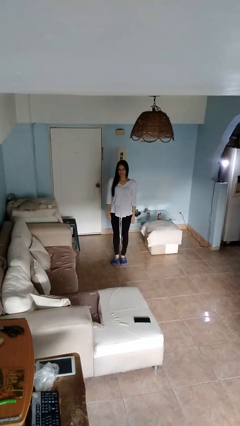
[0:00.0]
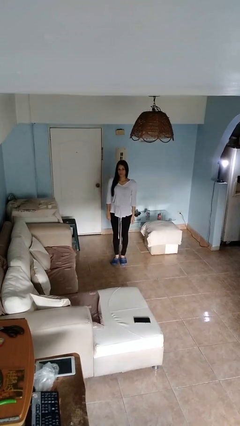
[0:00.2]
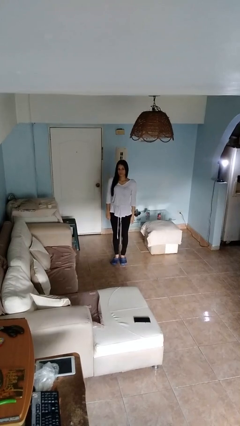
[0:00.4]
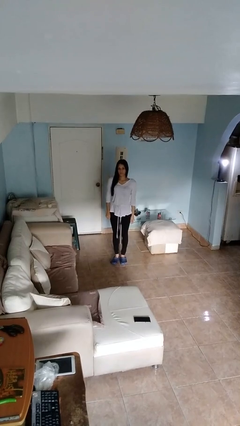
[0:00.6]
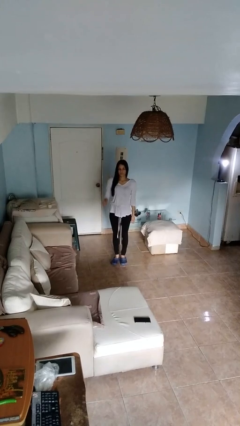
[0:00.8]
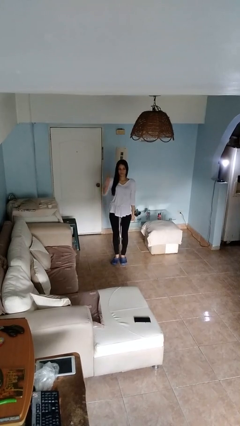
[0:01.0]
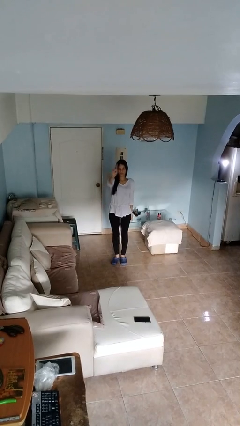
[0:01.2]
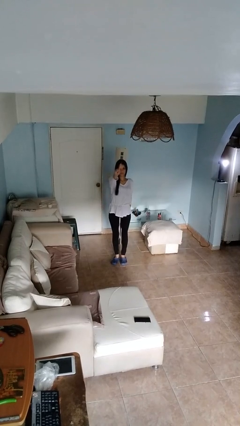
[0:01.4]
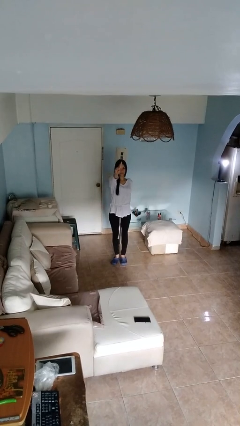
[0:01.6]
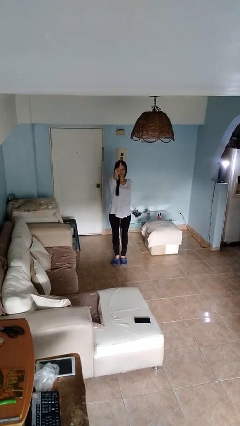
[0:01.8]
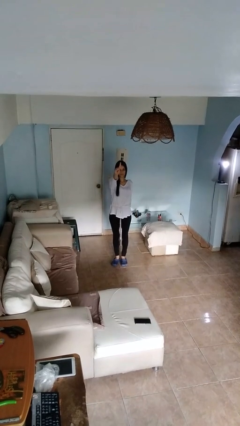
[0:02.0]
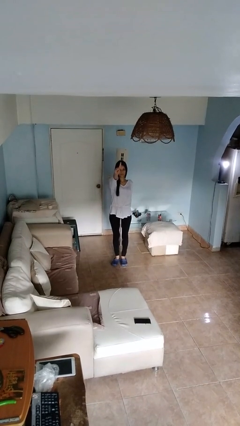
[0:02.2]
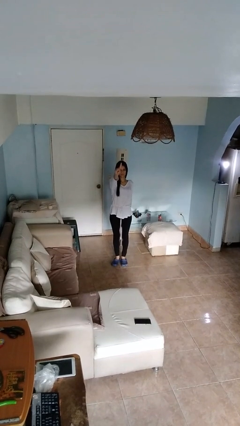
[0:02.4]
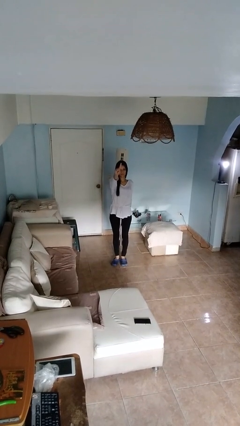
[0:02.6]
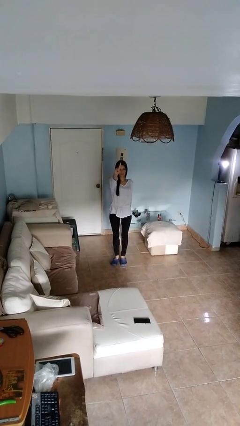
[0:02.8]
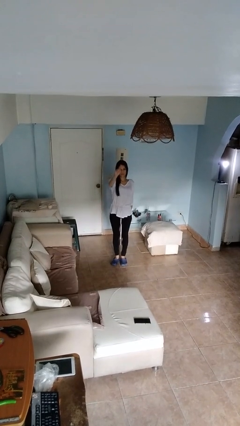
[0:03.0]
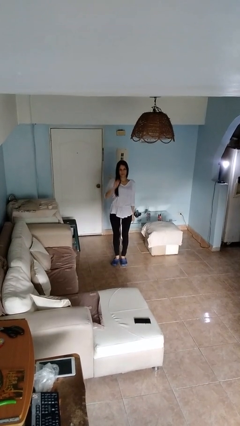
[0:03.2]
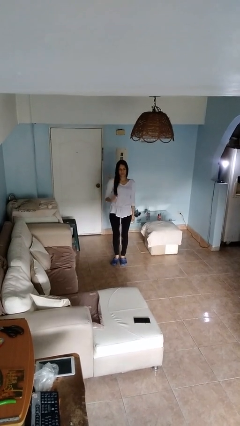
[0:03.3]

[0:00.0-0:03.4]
person gestures number one

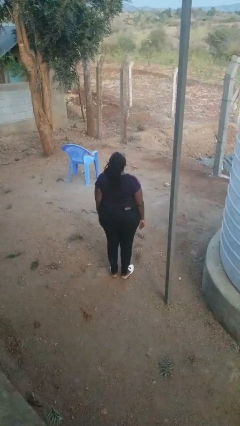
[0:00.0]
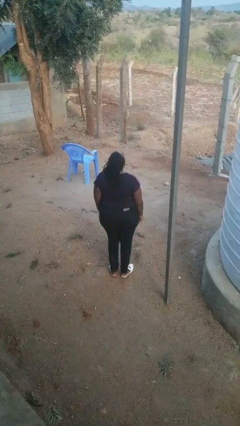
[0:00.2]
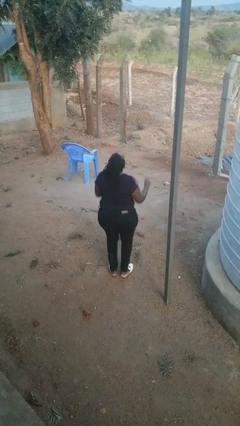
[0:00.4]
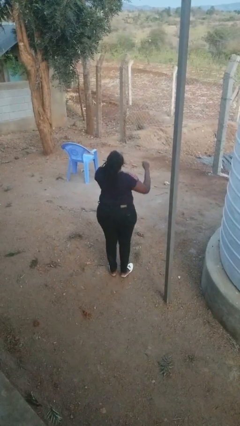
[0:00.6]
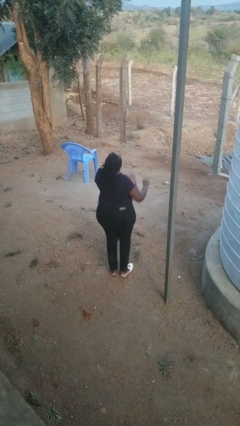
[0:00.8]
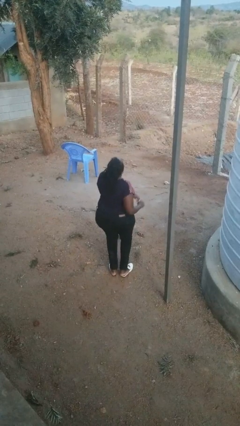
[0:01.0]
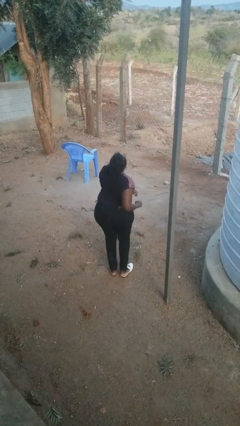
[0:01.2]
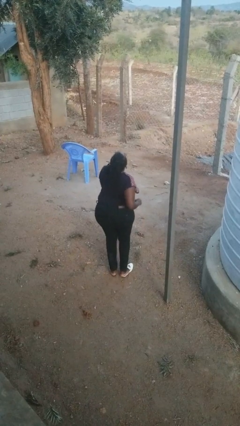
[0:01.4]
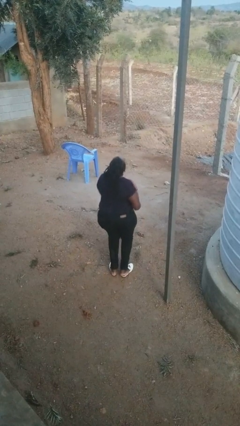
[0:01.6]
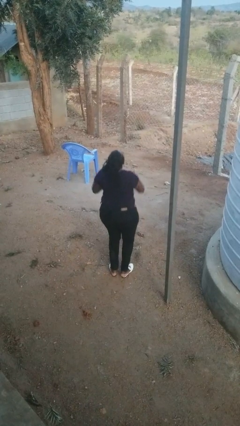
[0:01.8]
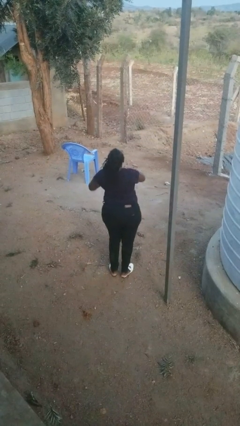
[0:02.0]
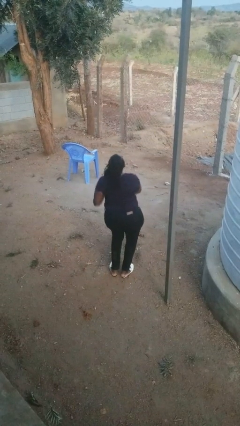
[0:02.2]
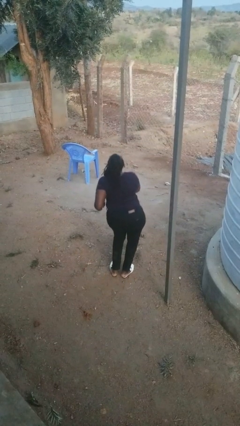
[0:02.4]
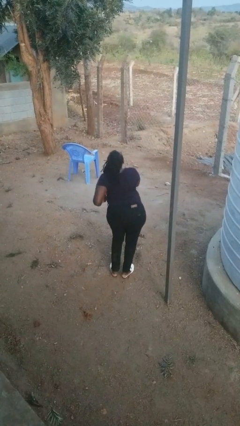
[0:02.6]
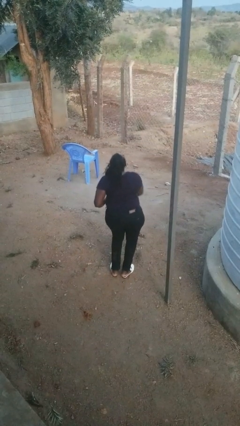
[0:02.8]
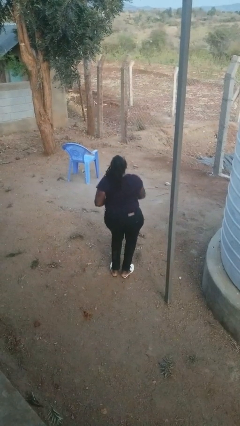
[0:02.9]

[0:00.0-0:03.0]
person dances in place

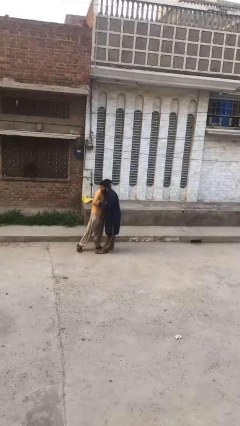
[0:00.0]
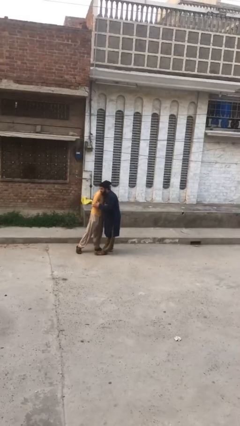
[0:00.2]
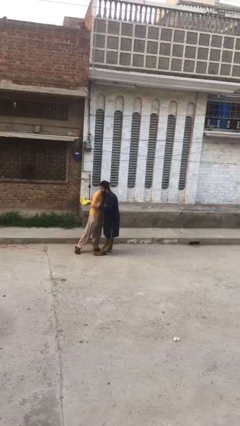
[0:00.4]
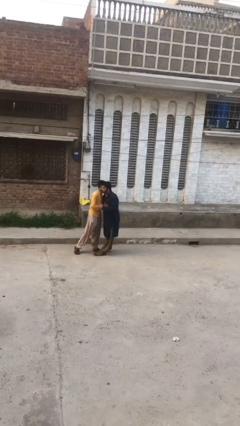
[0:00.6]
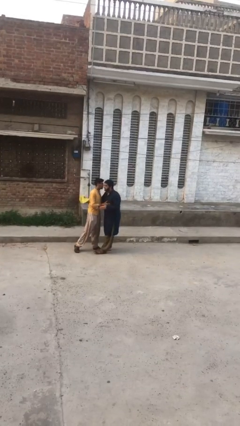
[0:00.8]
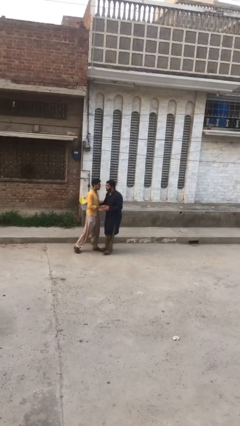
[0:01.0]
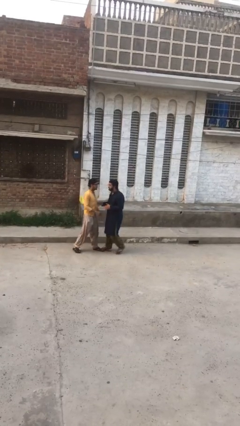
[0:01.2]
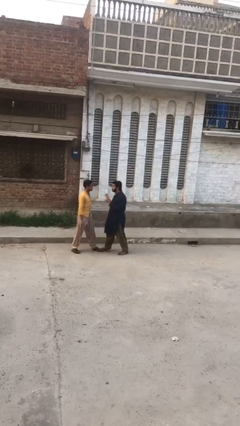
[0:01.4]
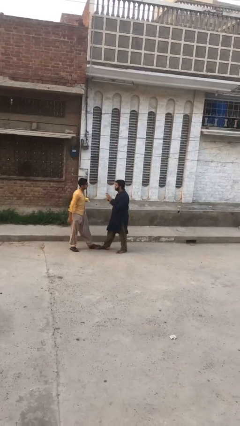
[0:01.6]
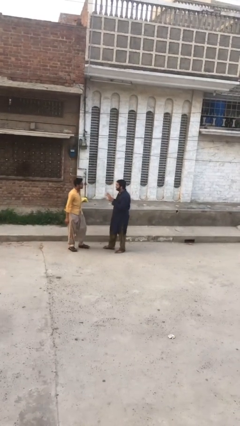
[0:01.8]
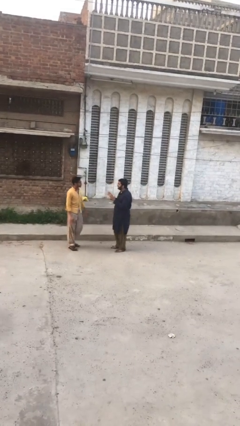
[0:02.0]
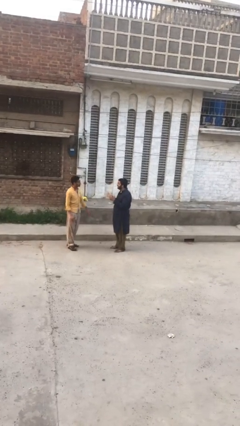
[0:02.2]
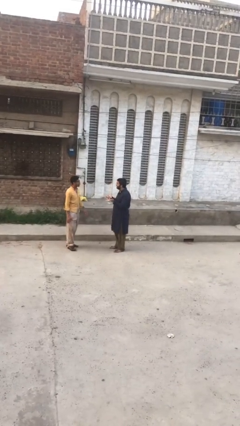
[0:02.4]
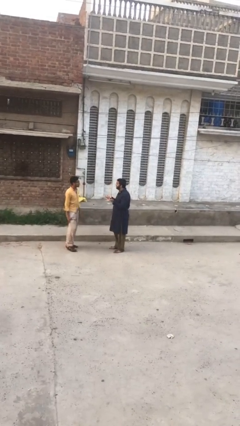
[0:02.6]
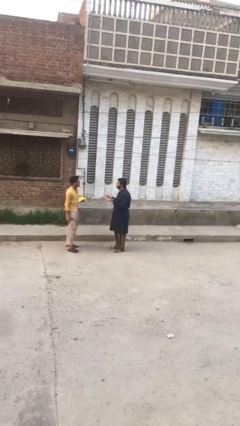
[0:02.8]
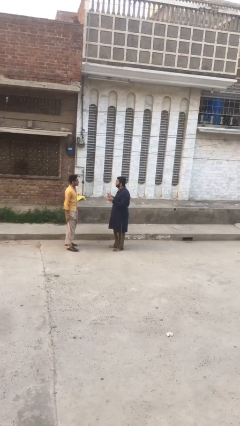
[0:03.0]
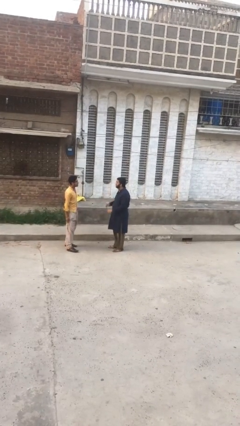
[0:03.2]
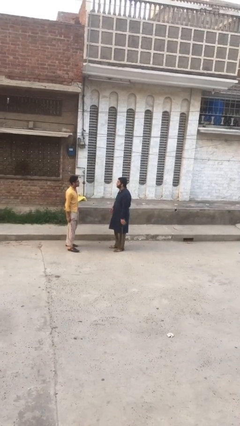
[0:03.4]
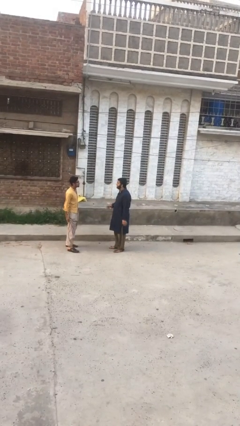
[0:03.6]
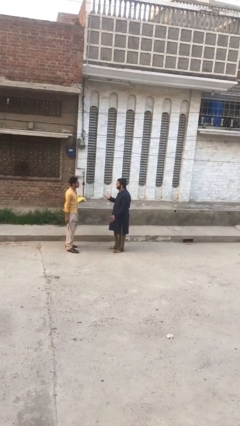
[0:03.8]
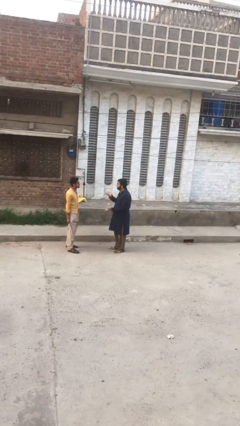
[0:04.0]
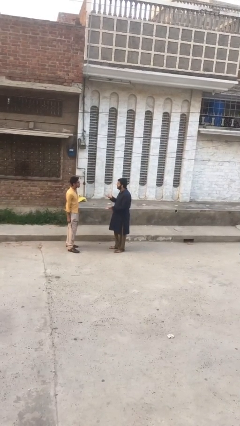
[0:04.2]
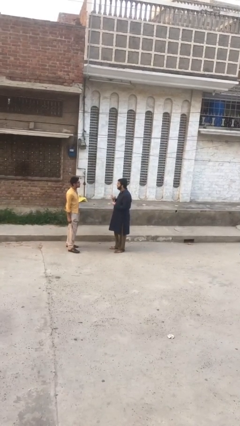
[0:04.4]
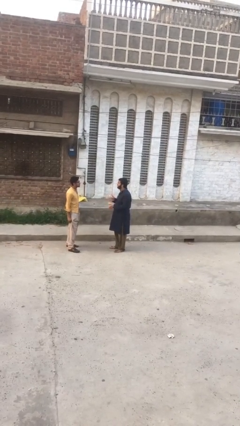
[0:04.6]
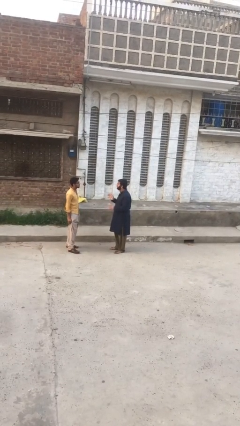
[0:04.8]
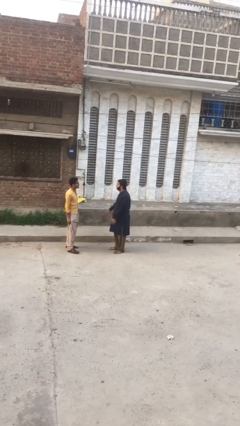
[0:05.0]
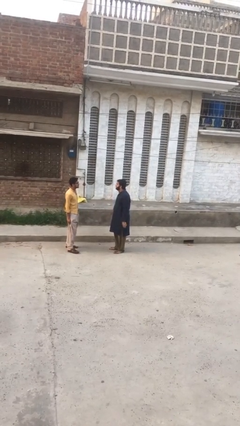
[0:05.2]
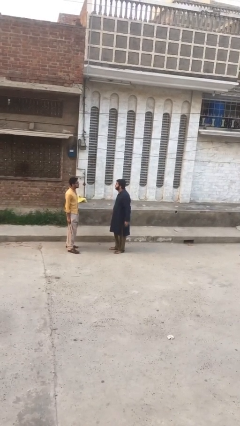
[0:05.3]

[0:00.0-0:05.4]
person talks to person

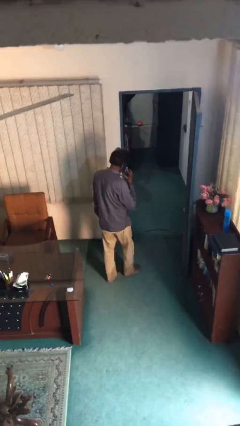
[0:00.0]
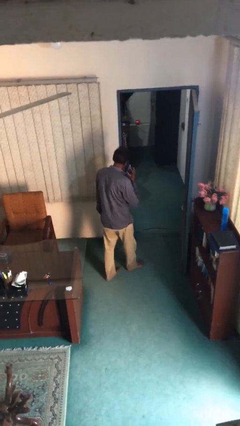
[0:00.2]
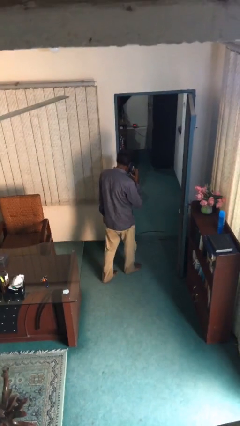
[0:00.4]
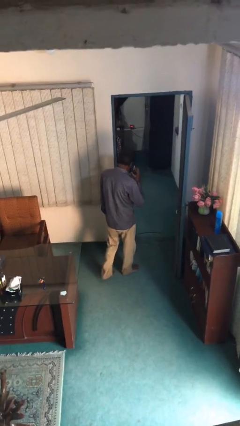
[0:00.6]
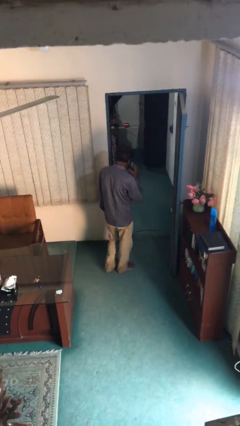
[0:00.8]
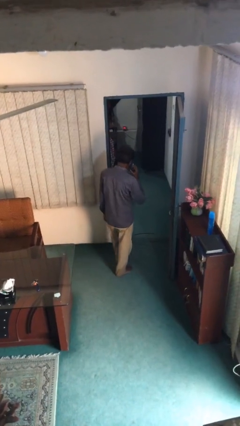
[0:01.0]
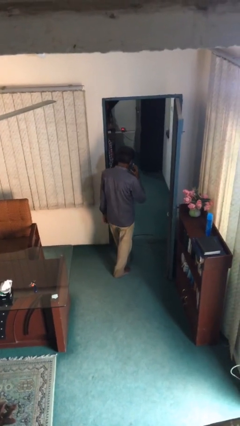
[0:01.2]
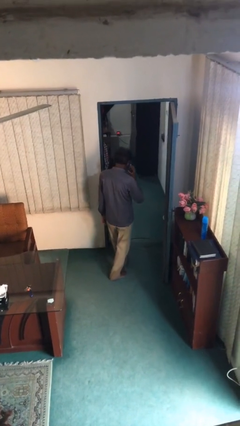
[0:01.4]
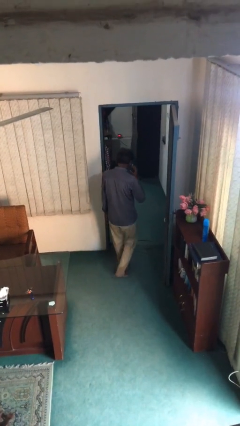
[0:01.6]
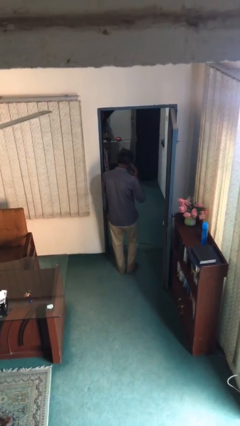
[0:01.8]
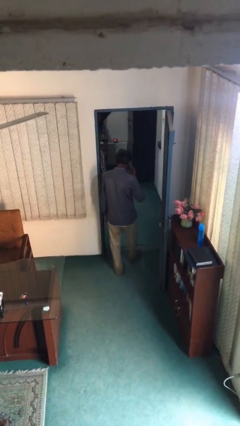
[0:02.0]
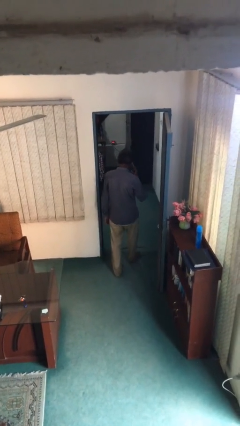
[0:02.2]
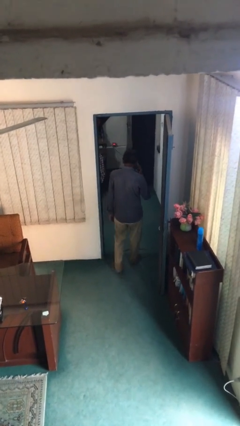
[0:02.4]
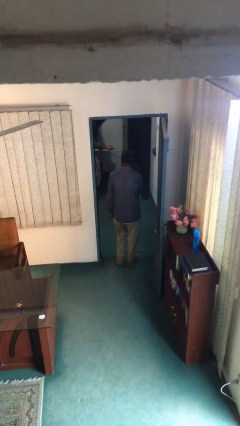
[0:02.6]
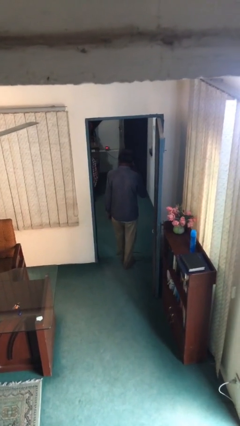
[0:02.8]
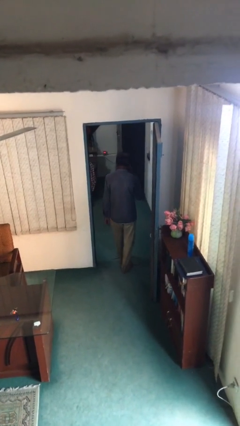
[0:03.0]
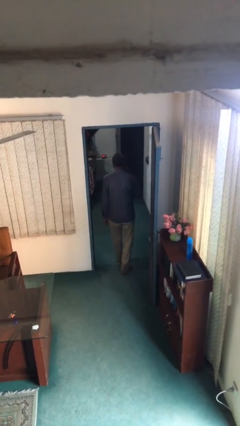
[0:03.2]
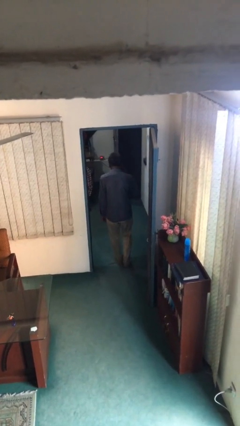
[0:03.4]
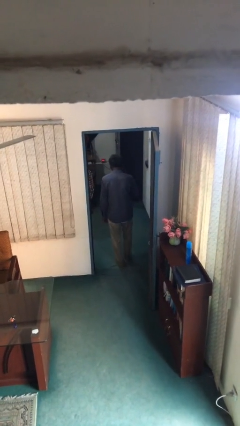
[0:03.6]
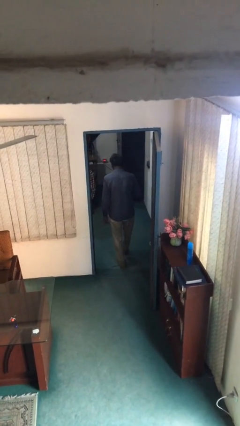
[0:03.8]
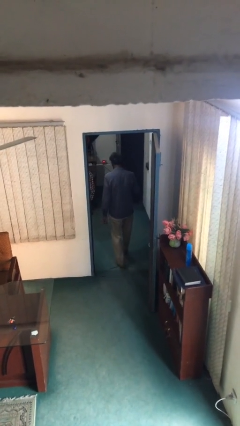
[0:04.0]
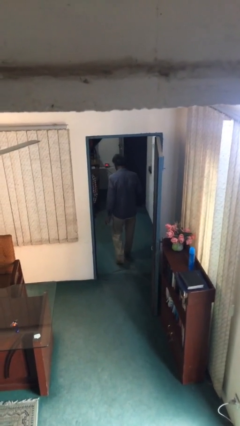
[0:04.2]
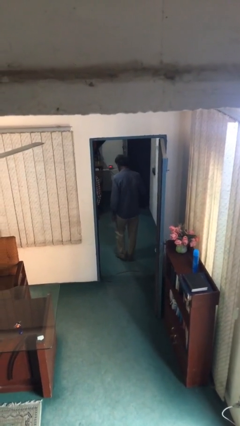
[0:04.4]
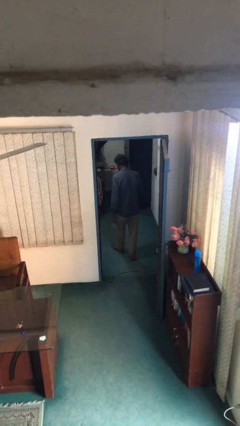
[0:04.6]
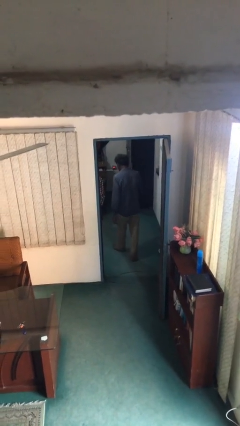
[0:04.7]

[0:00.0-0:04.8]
person exits scene through structure

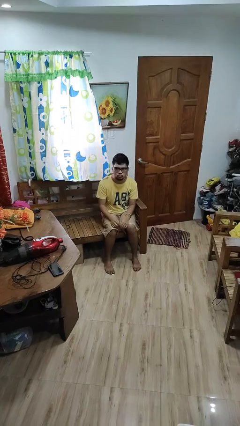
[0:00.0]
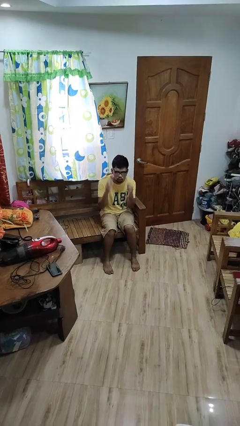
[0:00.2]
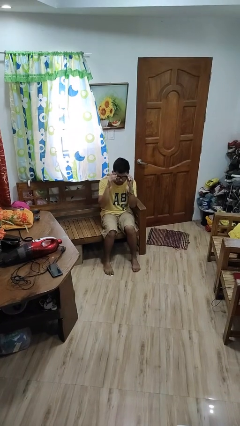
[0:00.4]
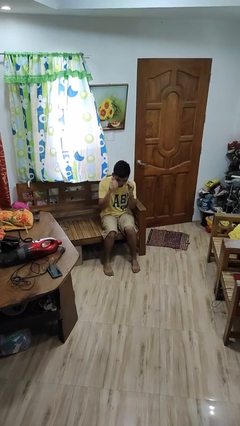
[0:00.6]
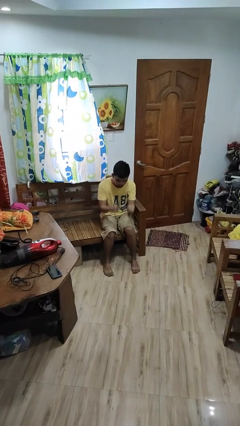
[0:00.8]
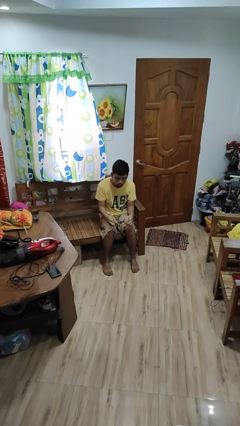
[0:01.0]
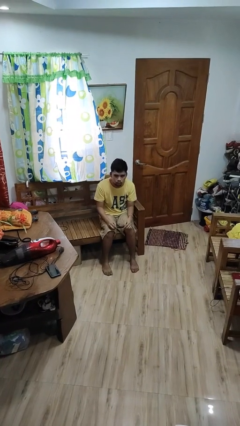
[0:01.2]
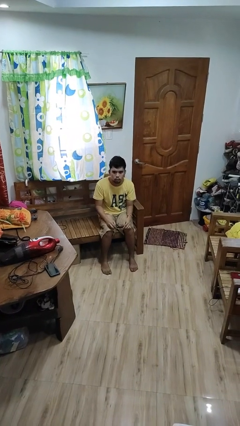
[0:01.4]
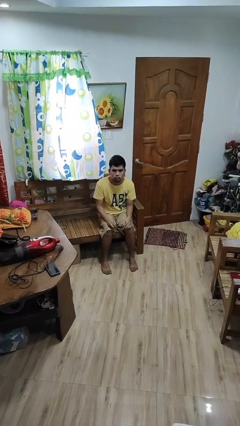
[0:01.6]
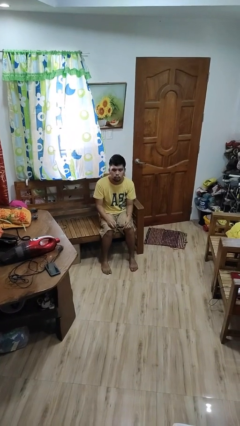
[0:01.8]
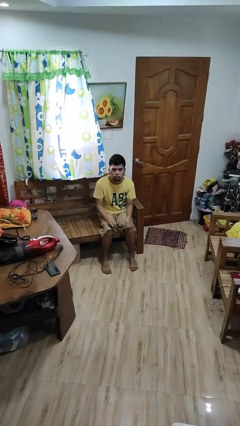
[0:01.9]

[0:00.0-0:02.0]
person takes off glasses
